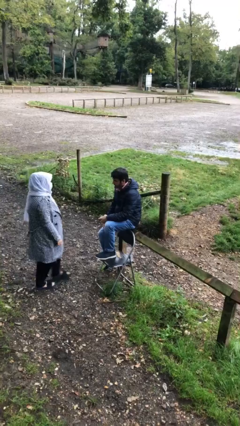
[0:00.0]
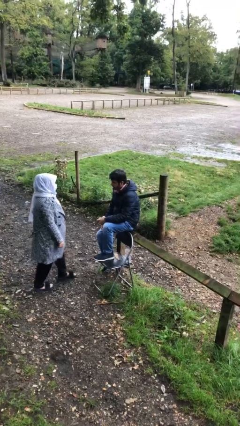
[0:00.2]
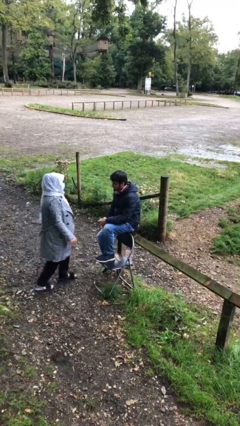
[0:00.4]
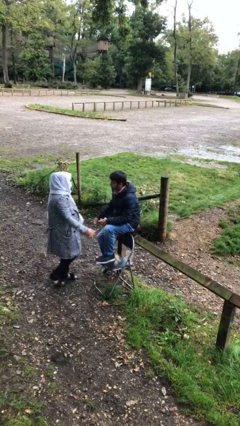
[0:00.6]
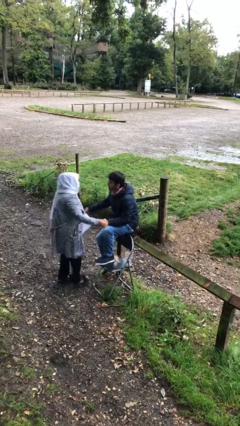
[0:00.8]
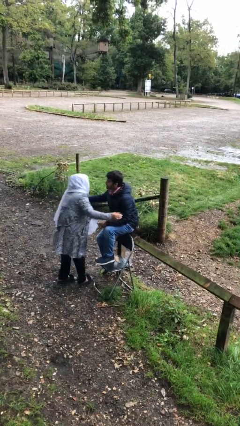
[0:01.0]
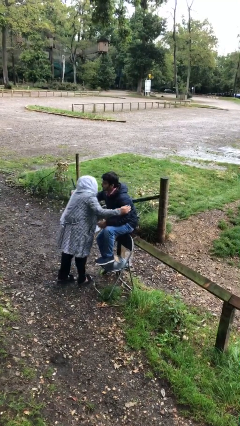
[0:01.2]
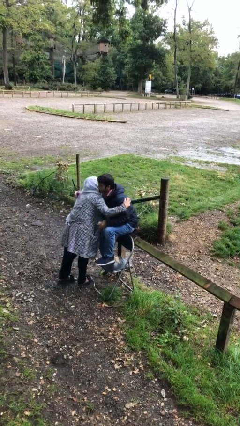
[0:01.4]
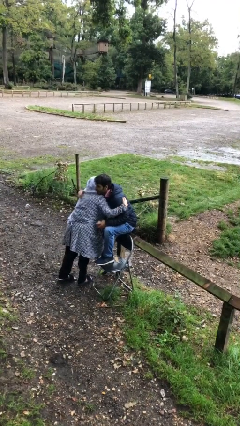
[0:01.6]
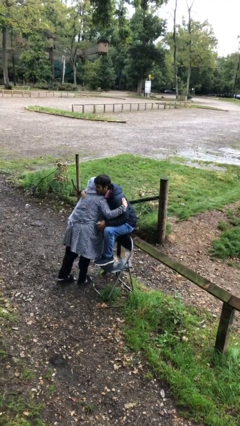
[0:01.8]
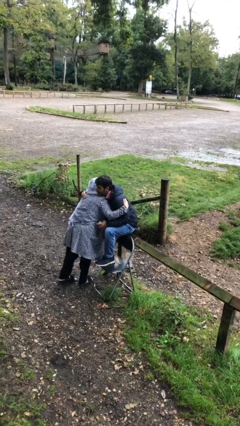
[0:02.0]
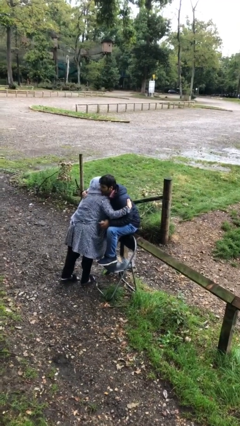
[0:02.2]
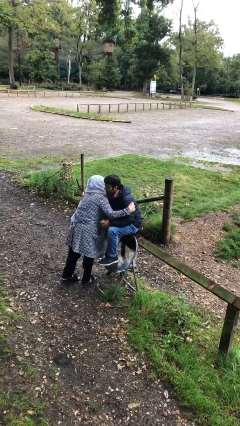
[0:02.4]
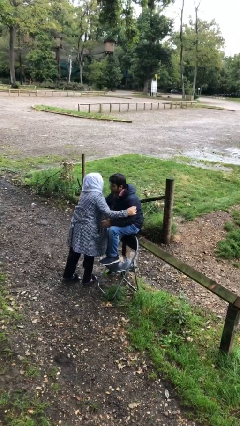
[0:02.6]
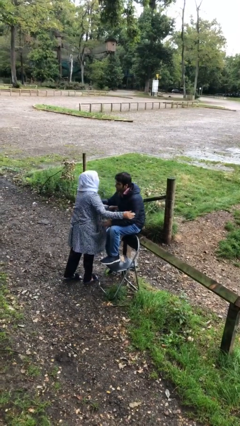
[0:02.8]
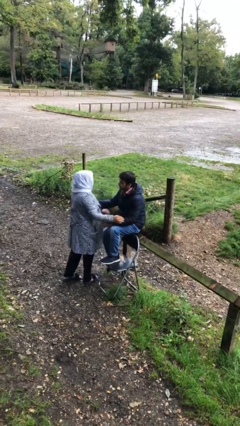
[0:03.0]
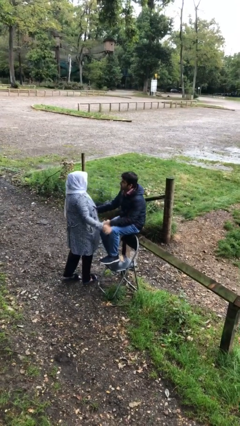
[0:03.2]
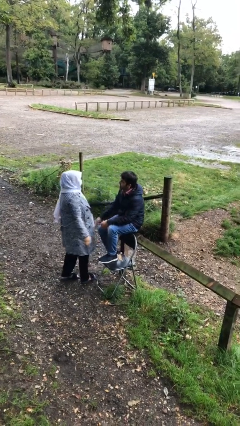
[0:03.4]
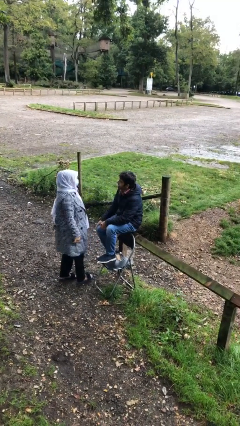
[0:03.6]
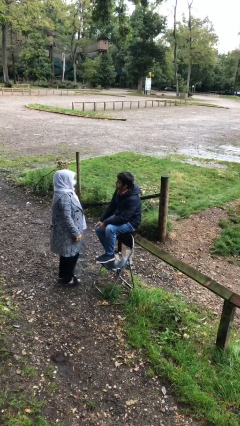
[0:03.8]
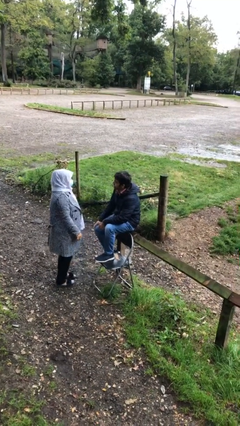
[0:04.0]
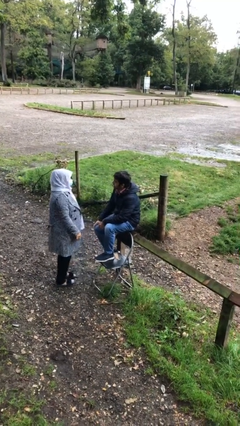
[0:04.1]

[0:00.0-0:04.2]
person embraces person

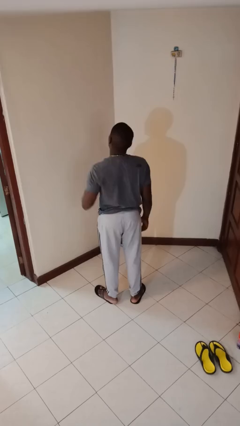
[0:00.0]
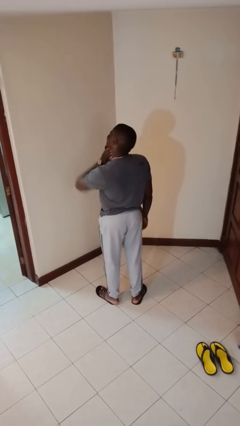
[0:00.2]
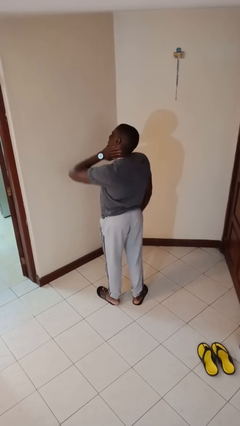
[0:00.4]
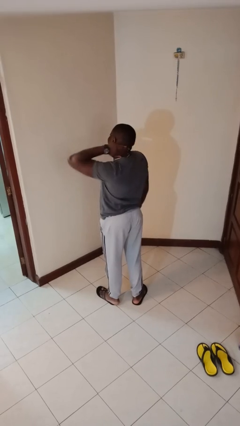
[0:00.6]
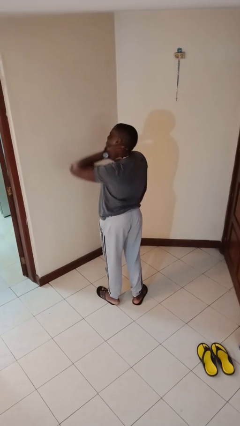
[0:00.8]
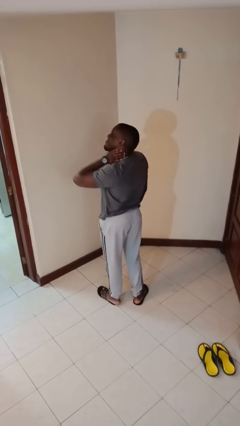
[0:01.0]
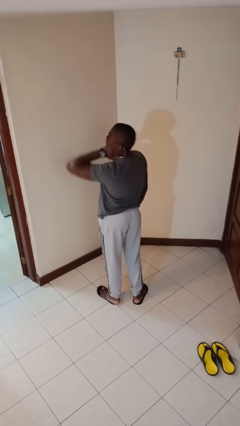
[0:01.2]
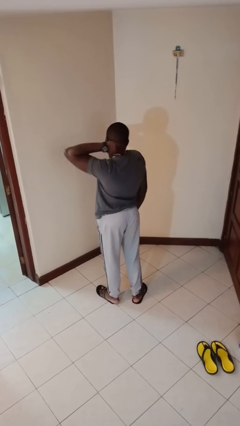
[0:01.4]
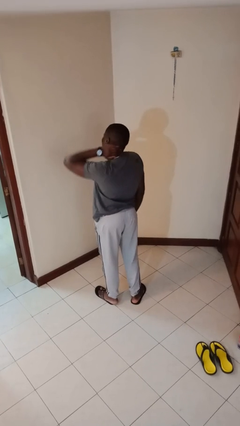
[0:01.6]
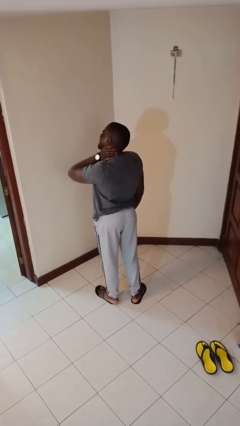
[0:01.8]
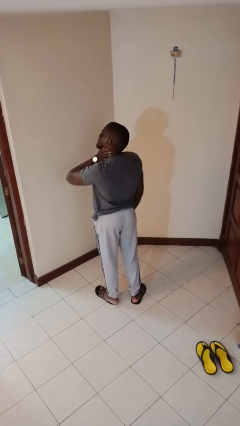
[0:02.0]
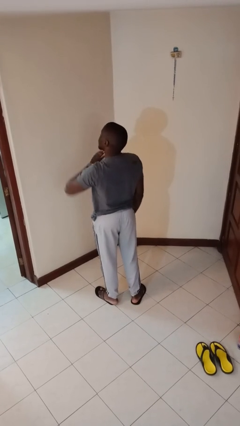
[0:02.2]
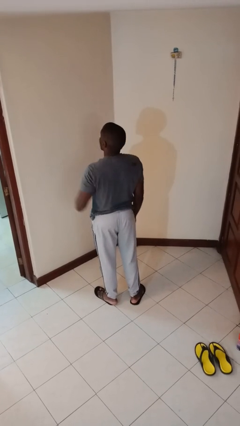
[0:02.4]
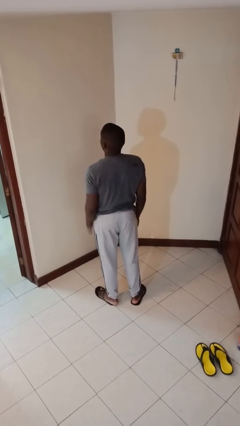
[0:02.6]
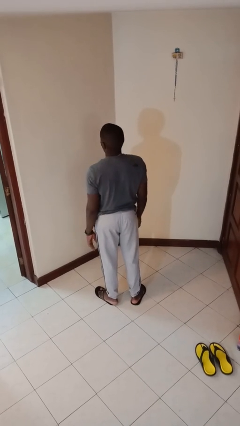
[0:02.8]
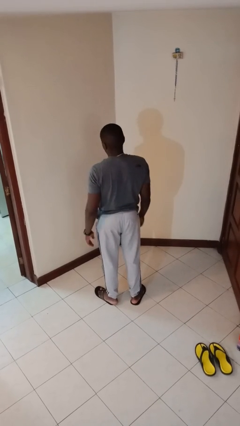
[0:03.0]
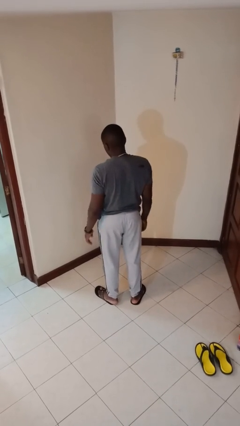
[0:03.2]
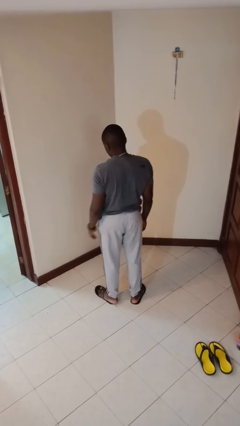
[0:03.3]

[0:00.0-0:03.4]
person rubs neck

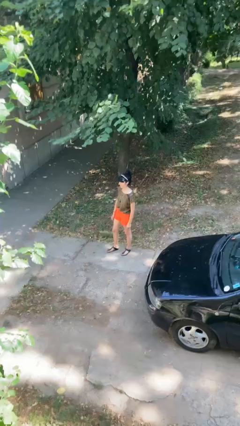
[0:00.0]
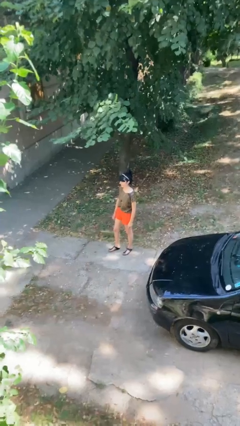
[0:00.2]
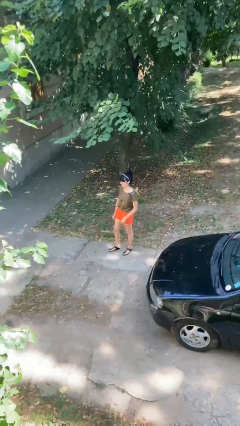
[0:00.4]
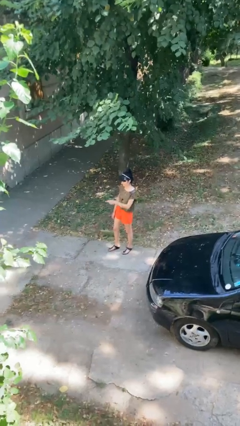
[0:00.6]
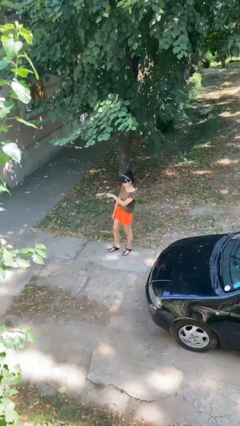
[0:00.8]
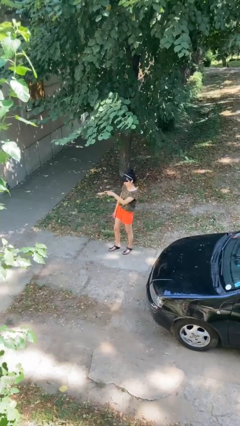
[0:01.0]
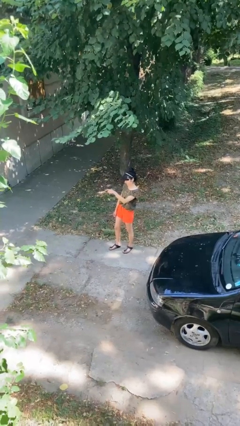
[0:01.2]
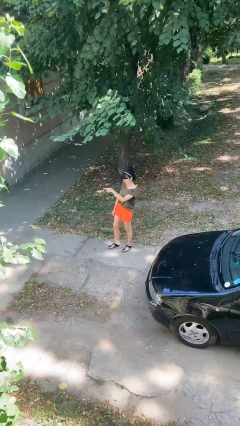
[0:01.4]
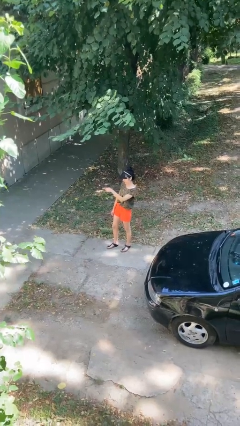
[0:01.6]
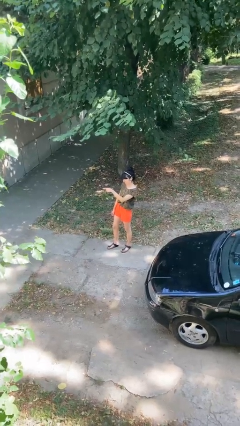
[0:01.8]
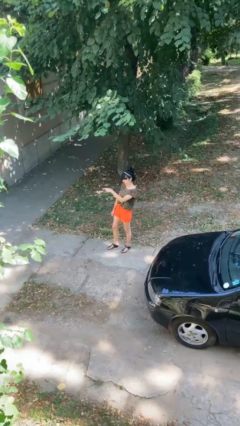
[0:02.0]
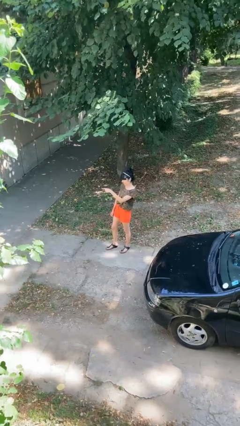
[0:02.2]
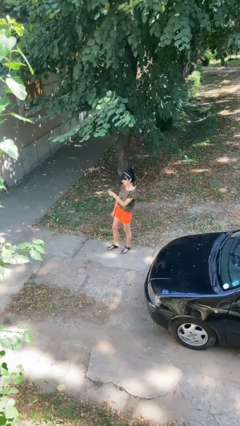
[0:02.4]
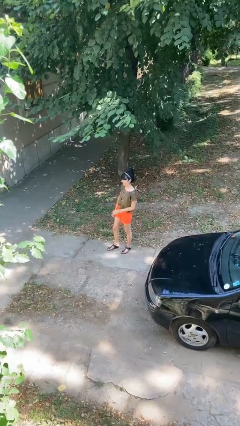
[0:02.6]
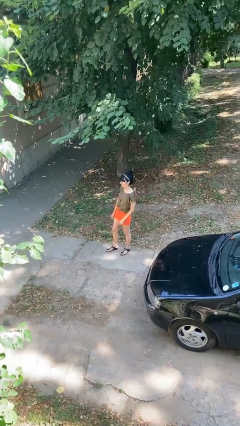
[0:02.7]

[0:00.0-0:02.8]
person points at person

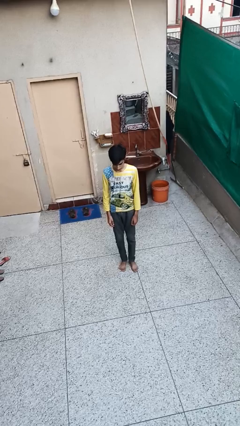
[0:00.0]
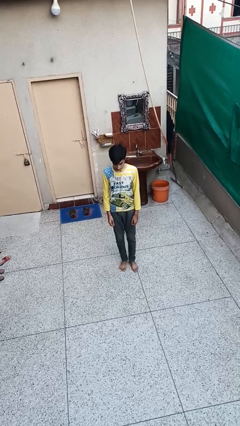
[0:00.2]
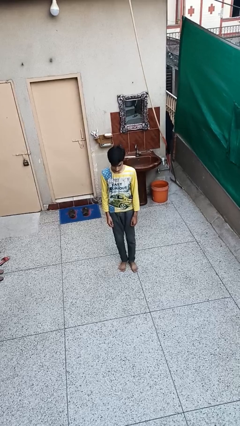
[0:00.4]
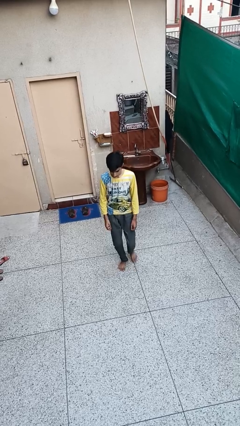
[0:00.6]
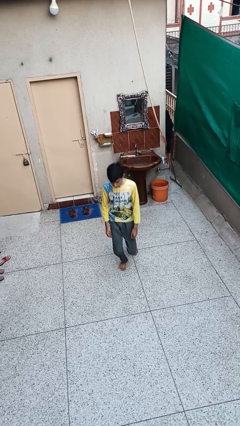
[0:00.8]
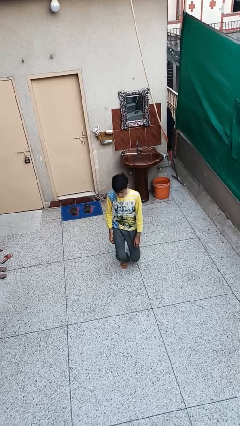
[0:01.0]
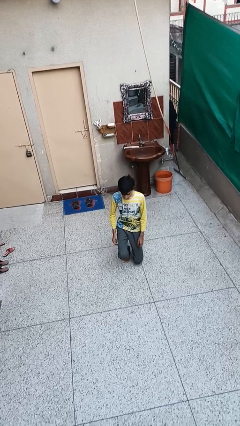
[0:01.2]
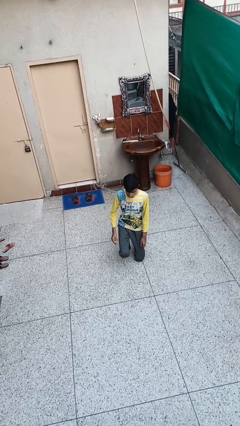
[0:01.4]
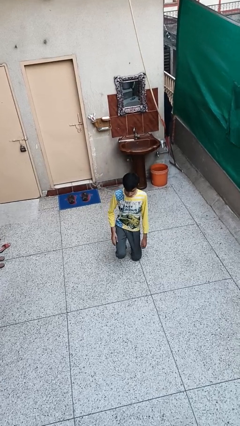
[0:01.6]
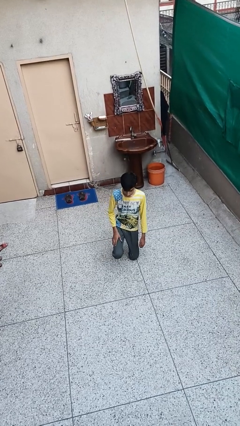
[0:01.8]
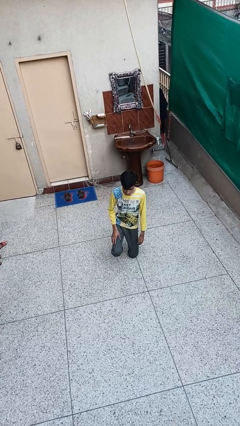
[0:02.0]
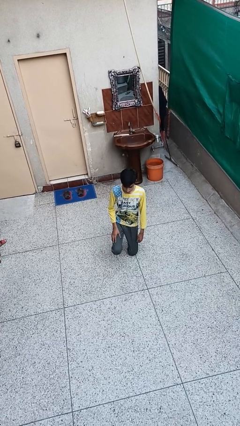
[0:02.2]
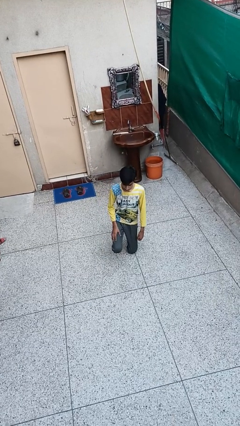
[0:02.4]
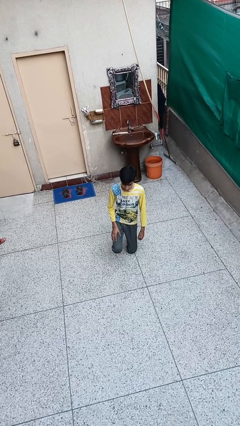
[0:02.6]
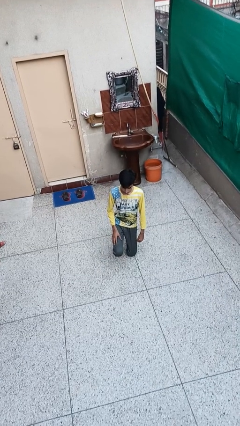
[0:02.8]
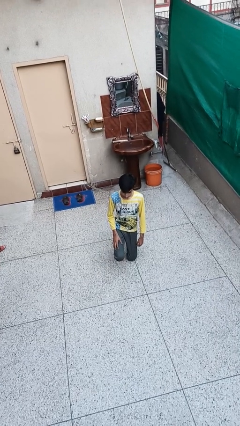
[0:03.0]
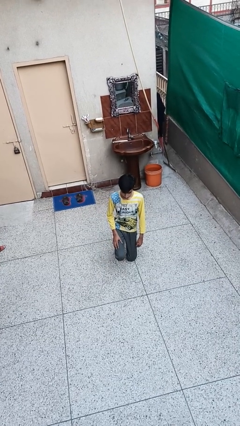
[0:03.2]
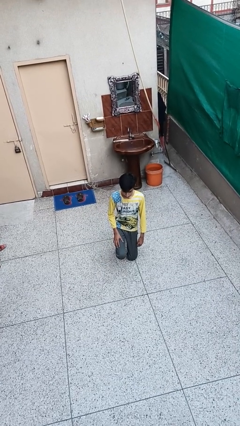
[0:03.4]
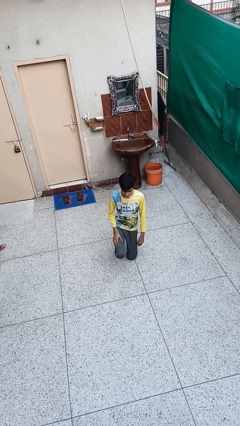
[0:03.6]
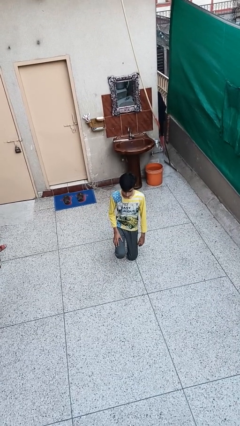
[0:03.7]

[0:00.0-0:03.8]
person kneels

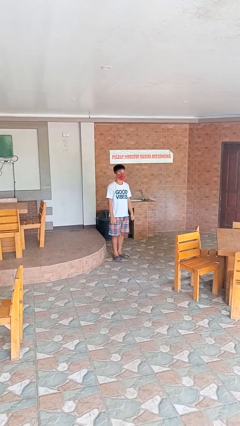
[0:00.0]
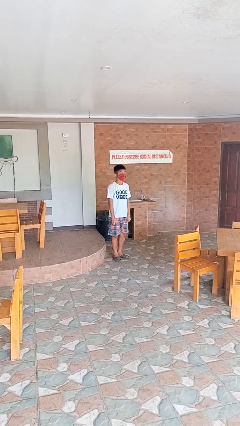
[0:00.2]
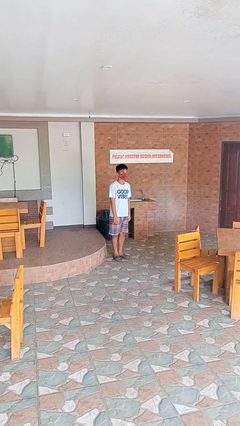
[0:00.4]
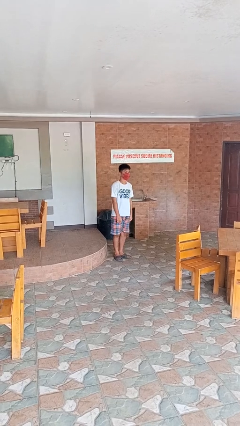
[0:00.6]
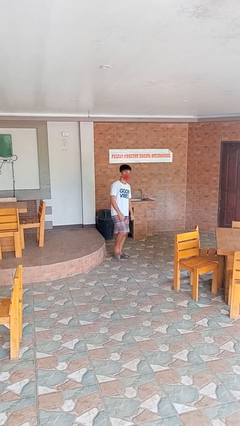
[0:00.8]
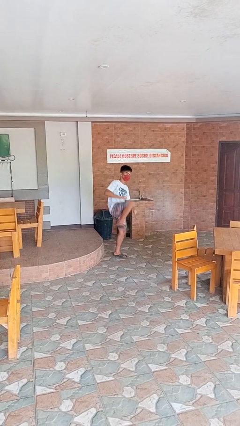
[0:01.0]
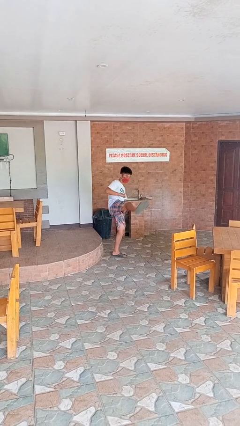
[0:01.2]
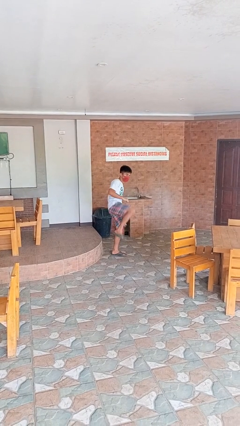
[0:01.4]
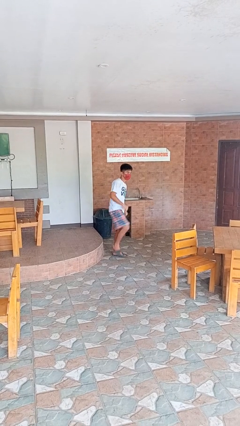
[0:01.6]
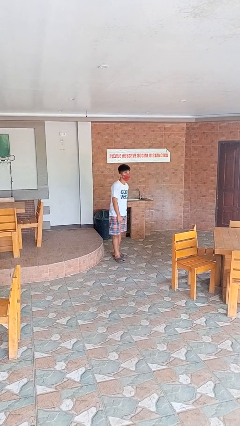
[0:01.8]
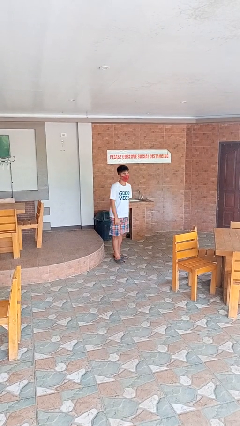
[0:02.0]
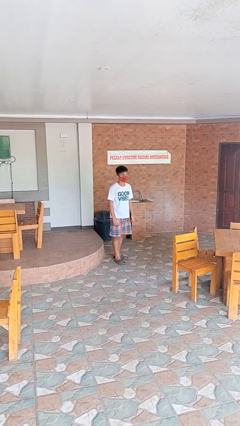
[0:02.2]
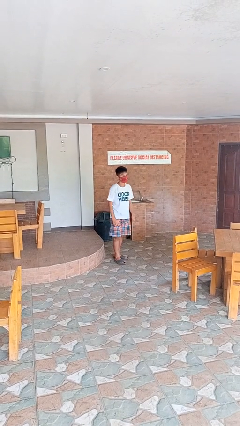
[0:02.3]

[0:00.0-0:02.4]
person karate kicks

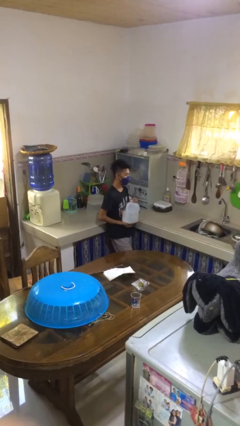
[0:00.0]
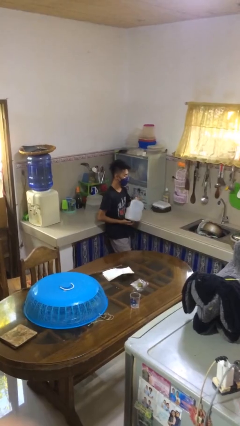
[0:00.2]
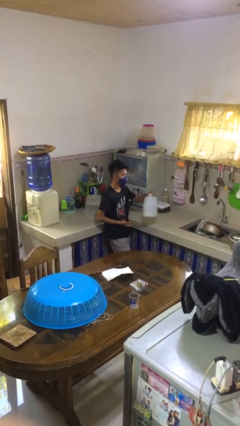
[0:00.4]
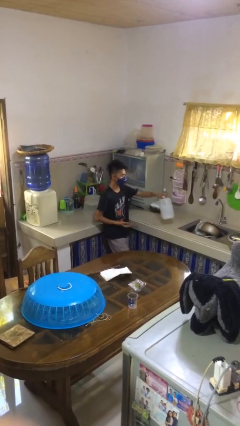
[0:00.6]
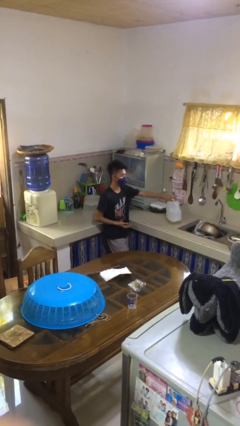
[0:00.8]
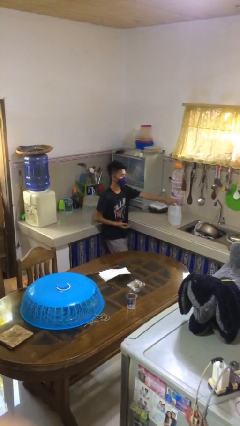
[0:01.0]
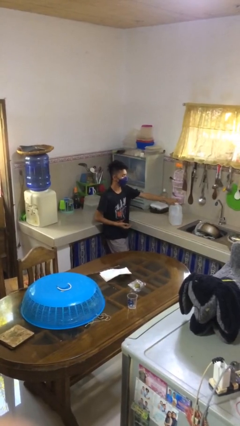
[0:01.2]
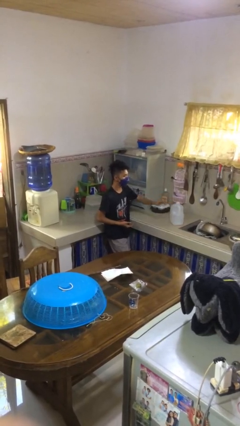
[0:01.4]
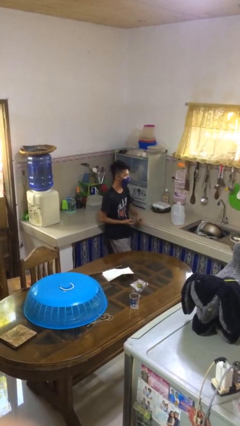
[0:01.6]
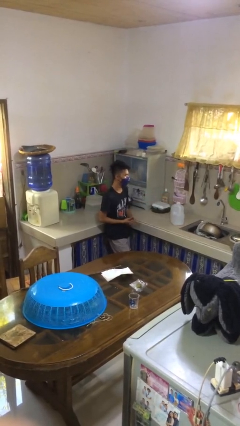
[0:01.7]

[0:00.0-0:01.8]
person puts down object on countertop
